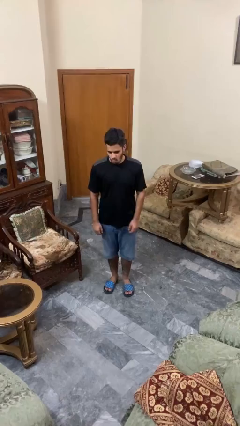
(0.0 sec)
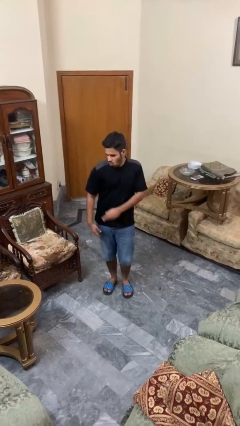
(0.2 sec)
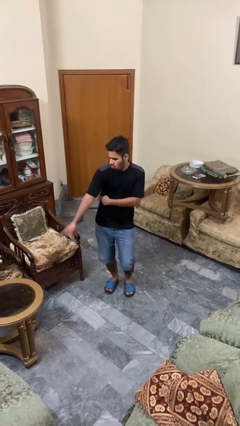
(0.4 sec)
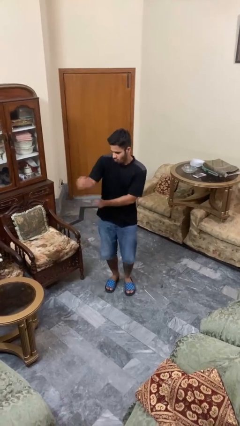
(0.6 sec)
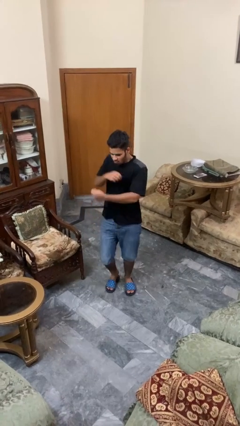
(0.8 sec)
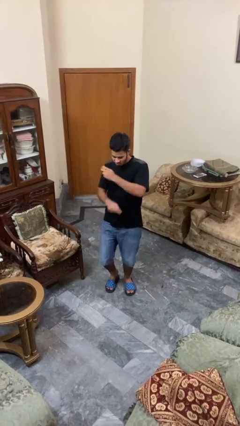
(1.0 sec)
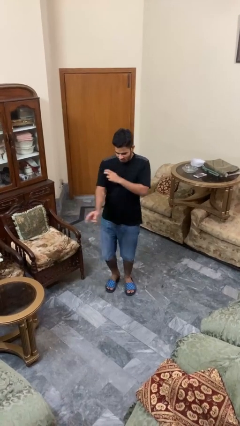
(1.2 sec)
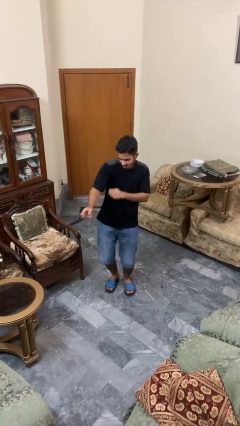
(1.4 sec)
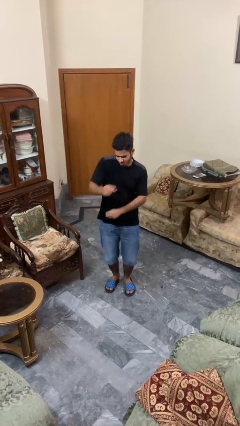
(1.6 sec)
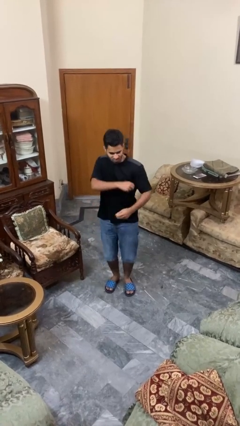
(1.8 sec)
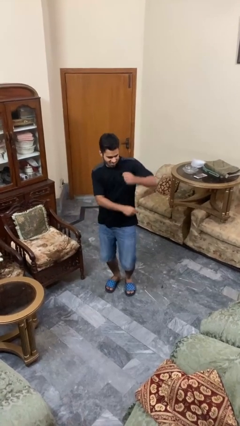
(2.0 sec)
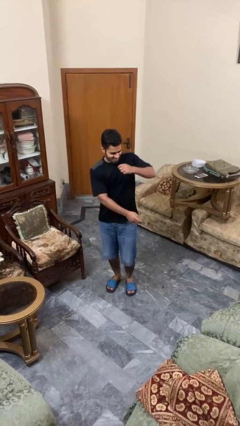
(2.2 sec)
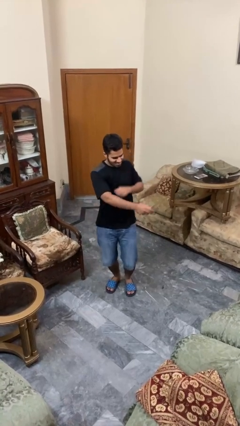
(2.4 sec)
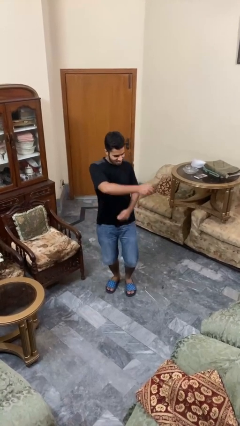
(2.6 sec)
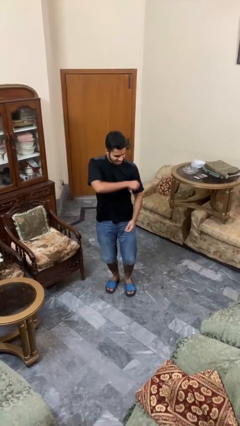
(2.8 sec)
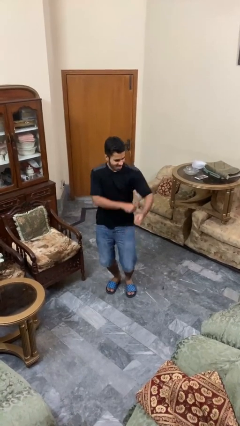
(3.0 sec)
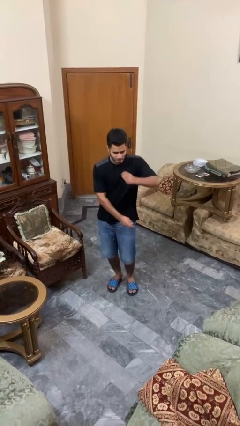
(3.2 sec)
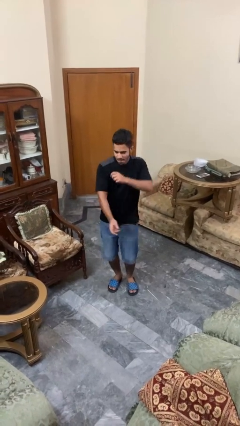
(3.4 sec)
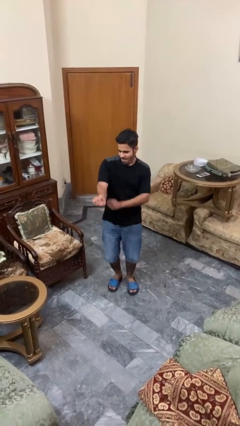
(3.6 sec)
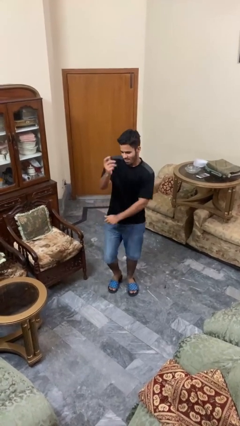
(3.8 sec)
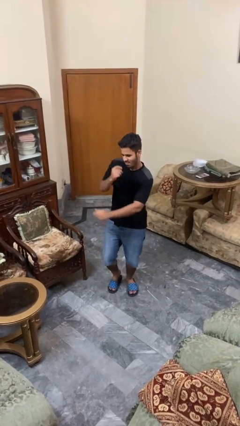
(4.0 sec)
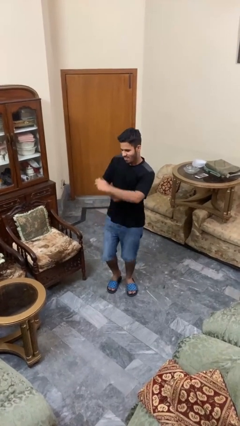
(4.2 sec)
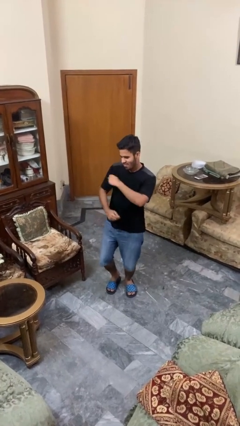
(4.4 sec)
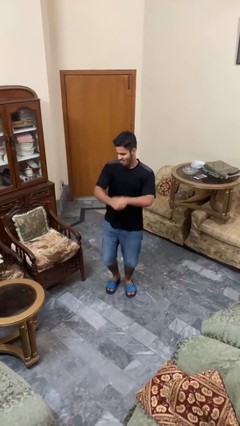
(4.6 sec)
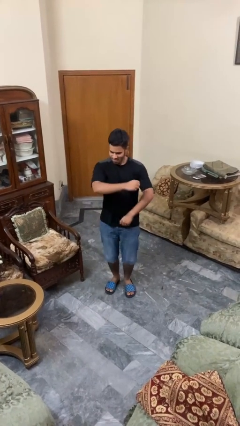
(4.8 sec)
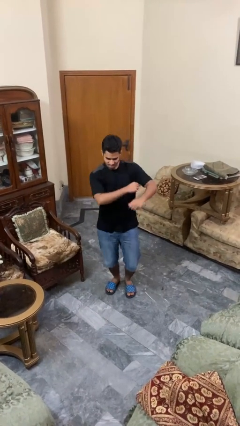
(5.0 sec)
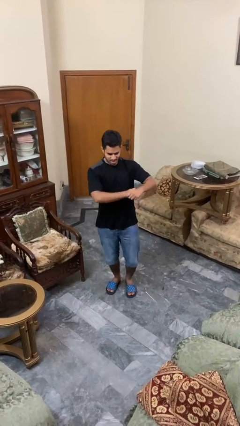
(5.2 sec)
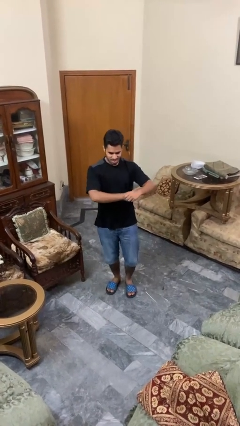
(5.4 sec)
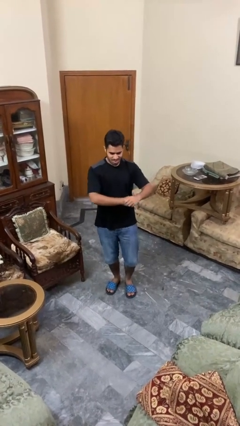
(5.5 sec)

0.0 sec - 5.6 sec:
person dances in place

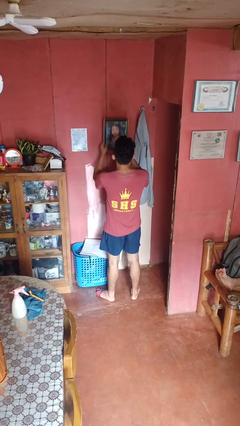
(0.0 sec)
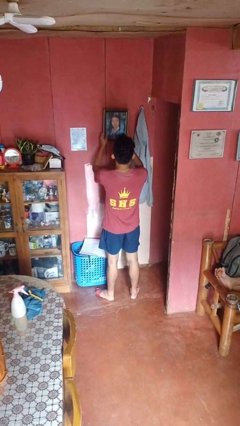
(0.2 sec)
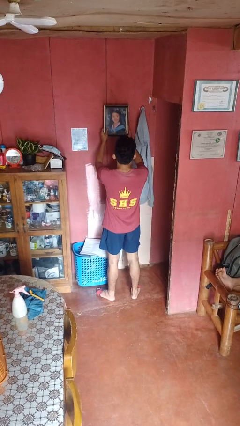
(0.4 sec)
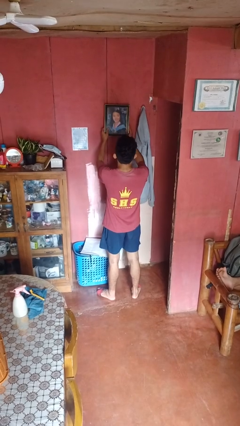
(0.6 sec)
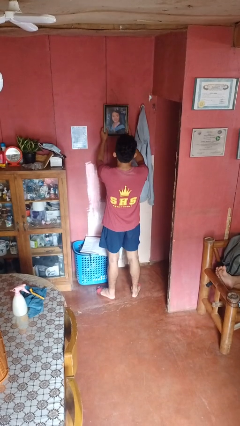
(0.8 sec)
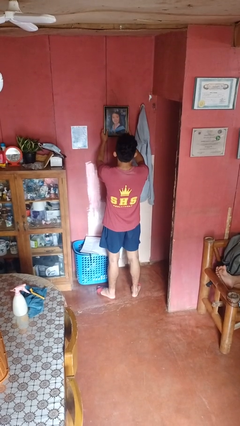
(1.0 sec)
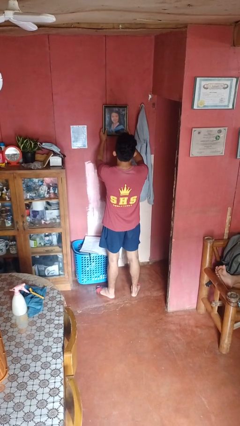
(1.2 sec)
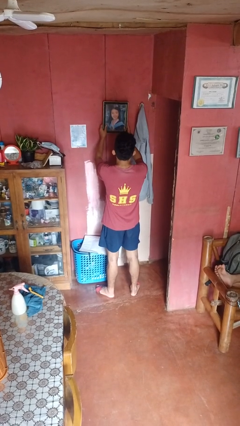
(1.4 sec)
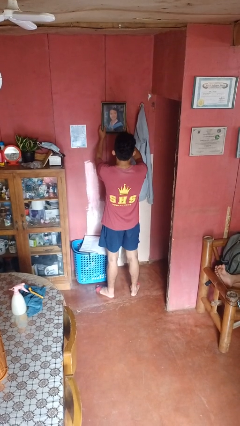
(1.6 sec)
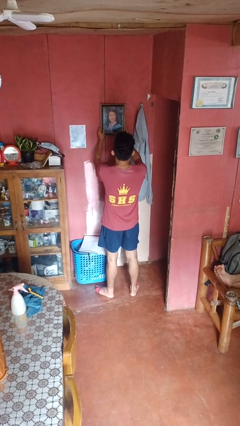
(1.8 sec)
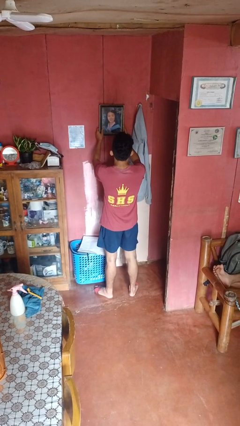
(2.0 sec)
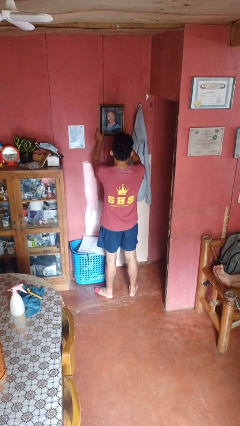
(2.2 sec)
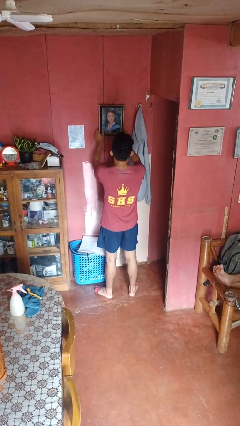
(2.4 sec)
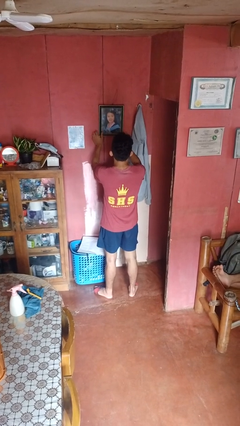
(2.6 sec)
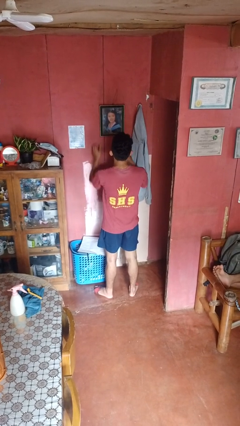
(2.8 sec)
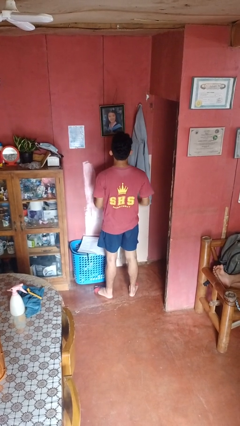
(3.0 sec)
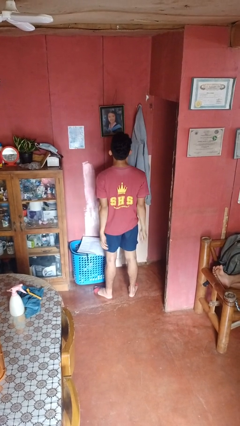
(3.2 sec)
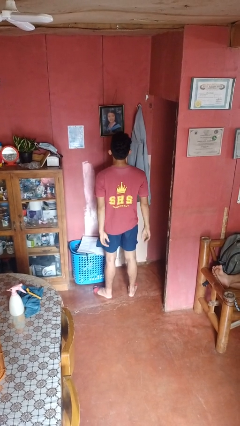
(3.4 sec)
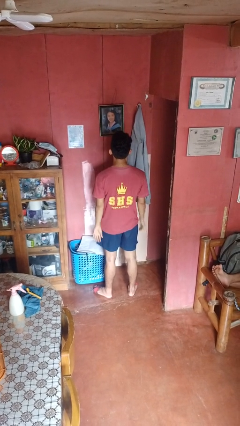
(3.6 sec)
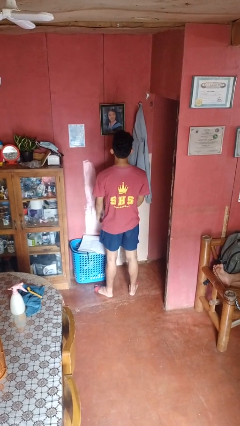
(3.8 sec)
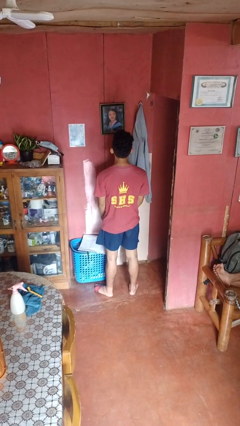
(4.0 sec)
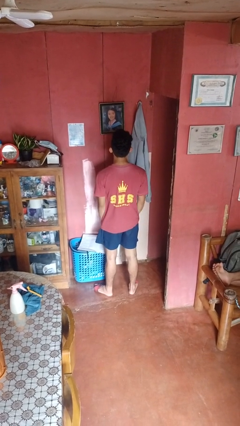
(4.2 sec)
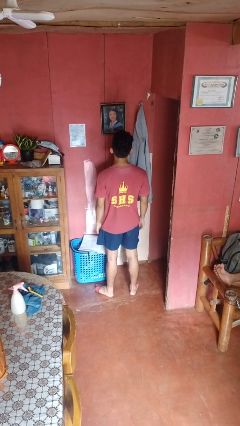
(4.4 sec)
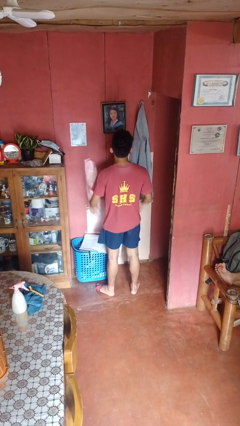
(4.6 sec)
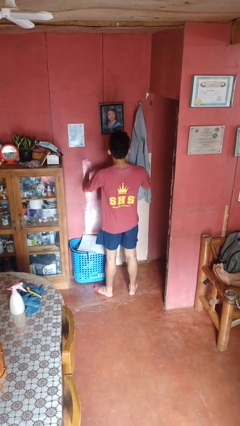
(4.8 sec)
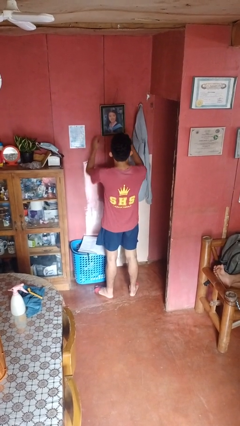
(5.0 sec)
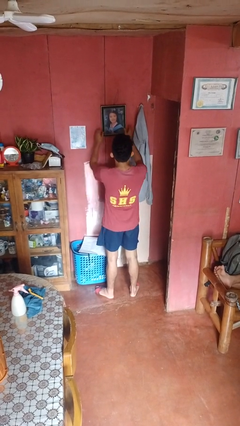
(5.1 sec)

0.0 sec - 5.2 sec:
person puts up picture frame

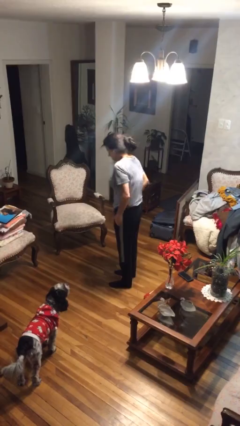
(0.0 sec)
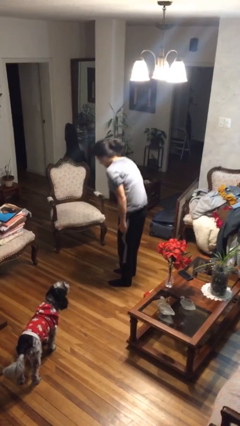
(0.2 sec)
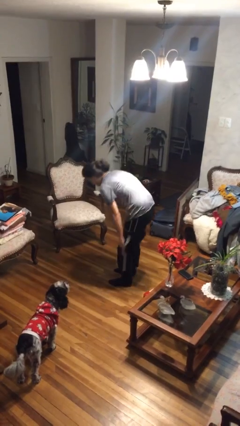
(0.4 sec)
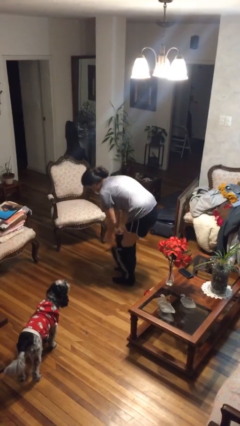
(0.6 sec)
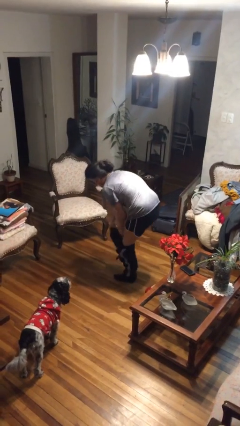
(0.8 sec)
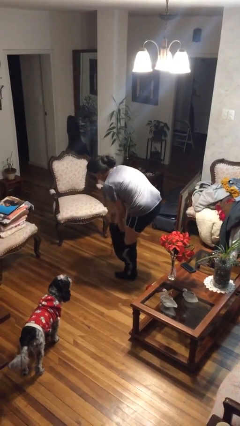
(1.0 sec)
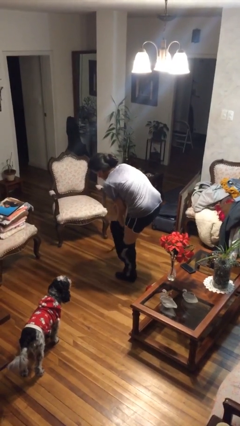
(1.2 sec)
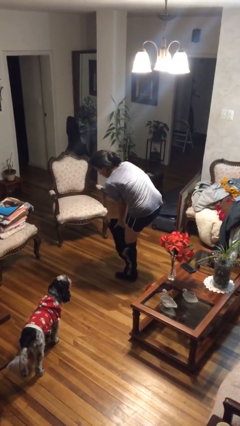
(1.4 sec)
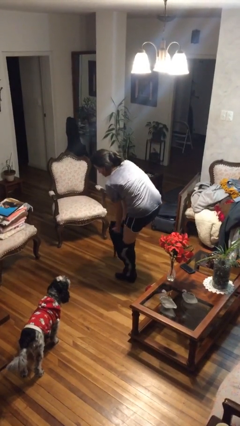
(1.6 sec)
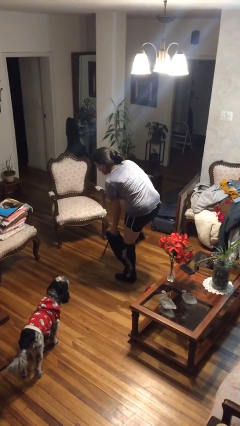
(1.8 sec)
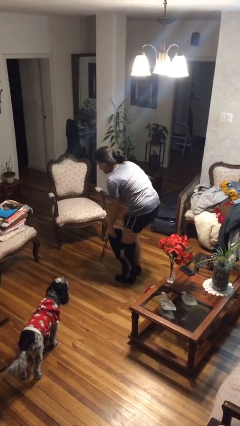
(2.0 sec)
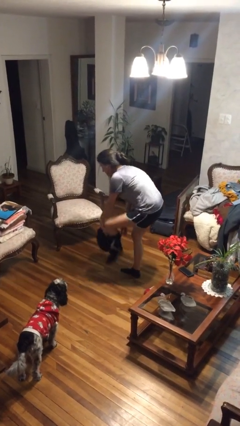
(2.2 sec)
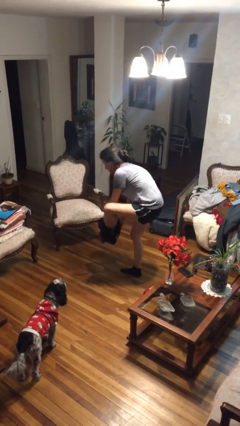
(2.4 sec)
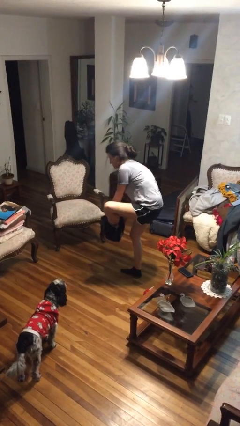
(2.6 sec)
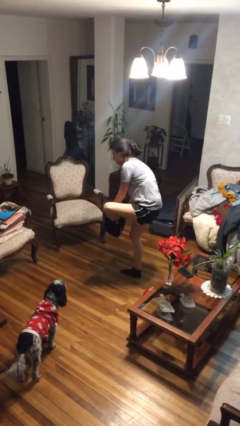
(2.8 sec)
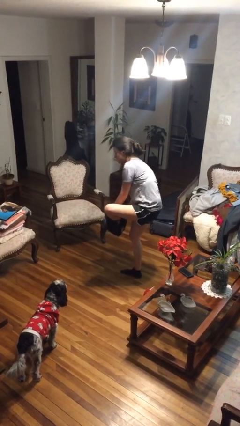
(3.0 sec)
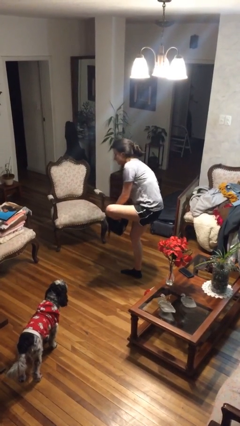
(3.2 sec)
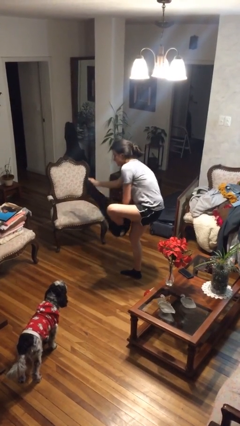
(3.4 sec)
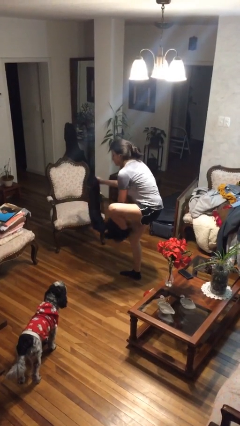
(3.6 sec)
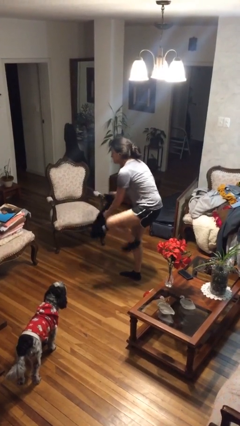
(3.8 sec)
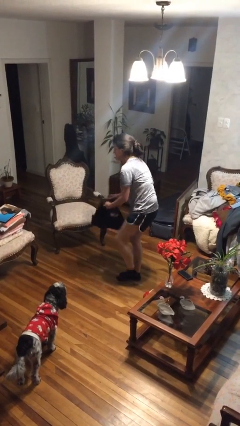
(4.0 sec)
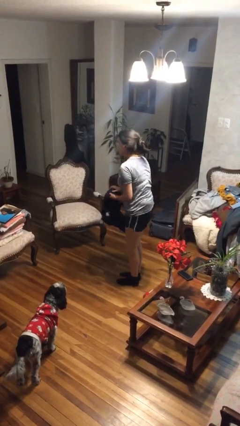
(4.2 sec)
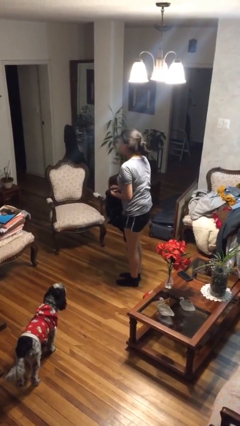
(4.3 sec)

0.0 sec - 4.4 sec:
person takes off pants

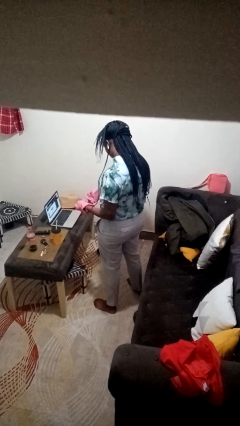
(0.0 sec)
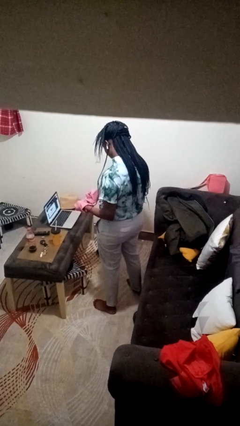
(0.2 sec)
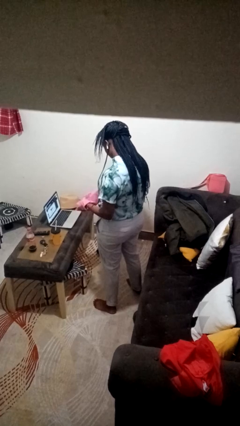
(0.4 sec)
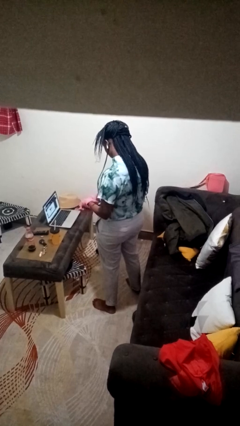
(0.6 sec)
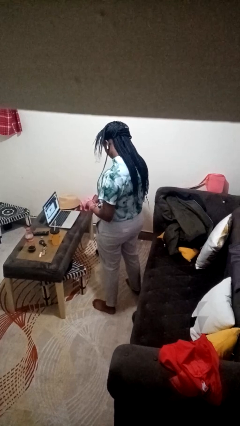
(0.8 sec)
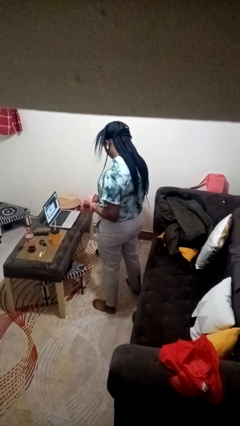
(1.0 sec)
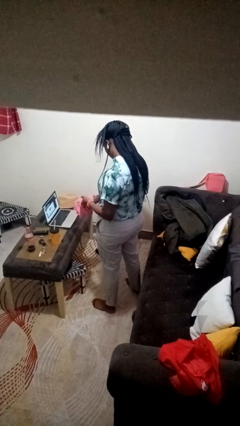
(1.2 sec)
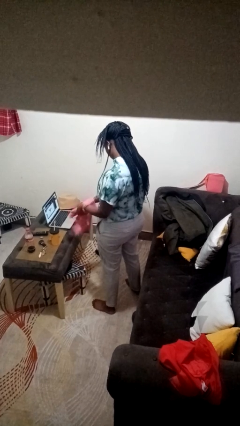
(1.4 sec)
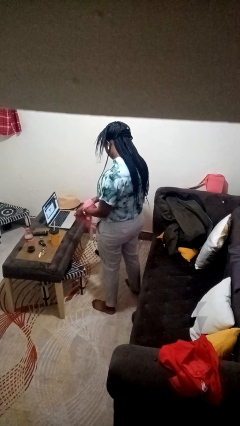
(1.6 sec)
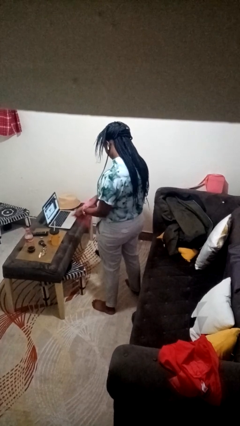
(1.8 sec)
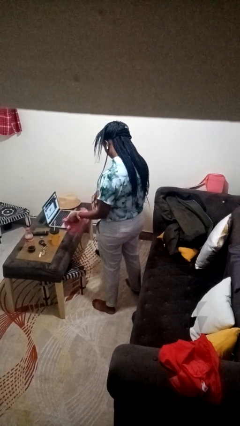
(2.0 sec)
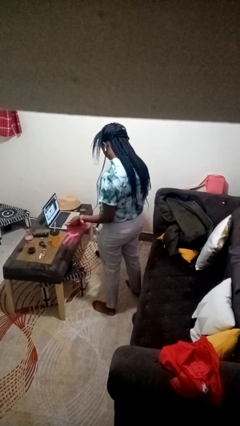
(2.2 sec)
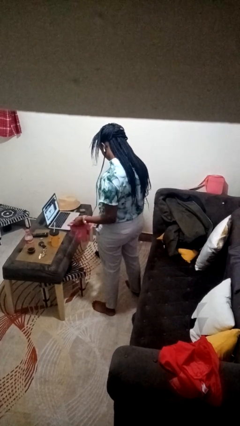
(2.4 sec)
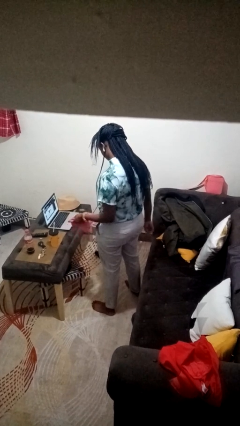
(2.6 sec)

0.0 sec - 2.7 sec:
person takes off gloves

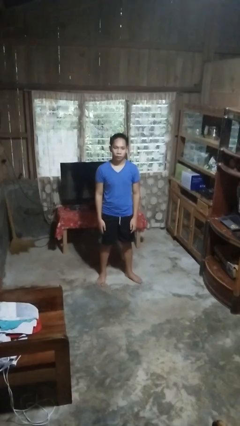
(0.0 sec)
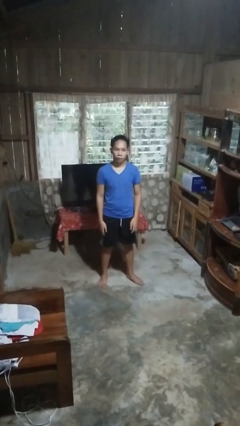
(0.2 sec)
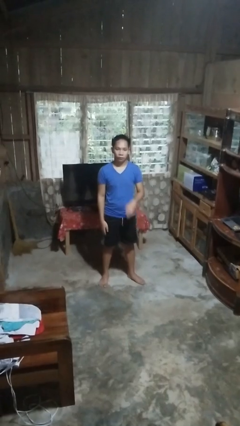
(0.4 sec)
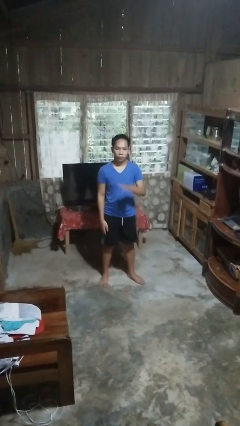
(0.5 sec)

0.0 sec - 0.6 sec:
person gestures number five
